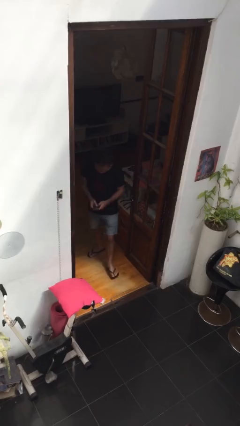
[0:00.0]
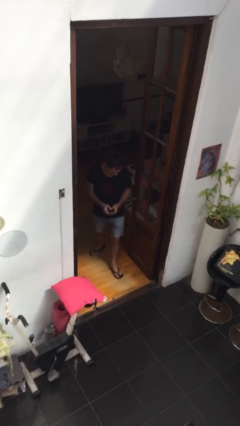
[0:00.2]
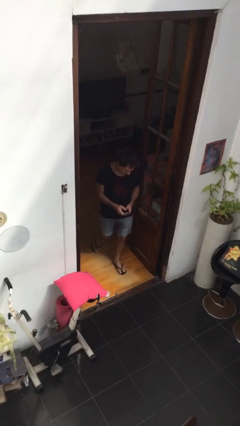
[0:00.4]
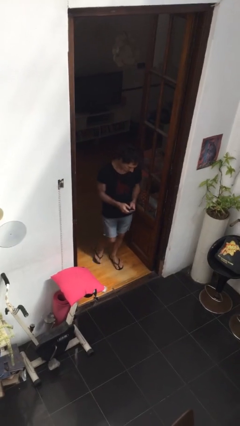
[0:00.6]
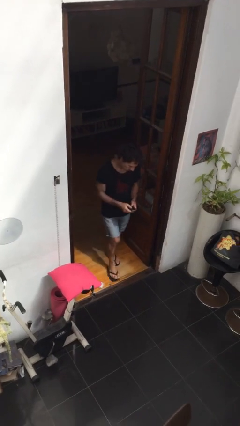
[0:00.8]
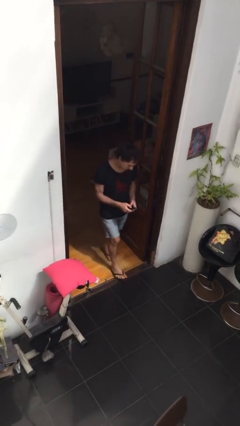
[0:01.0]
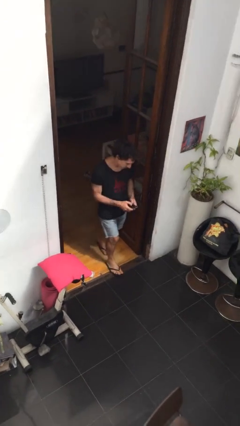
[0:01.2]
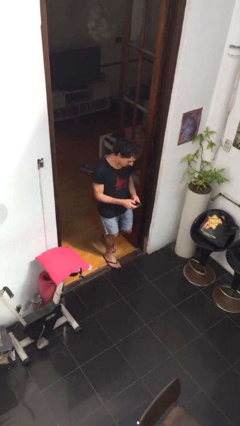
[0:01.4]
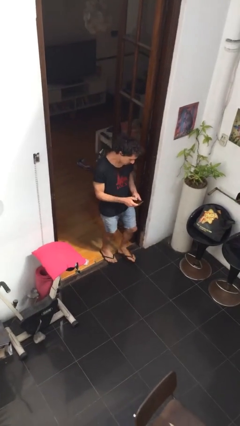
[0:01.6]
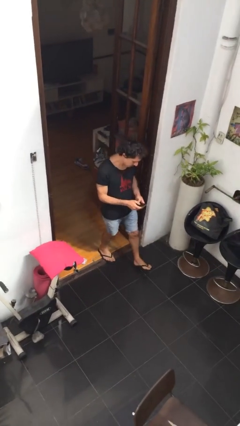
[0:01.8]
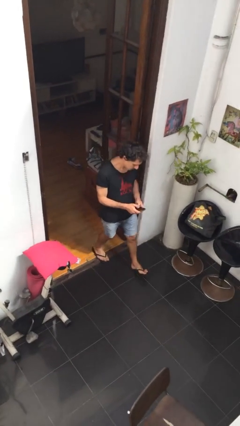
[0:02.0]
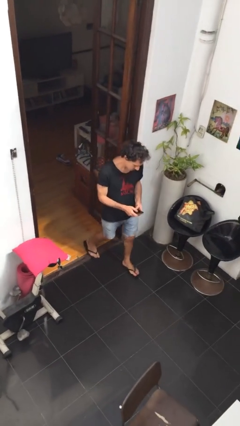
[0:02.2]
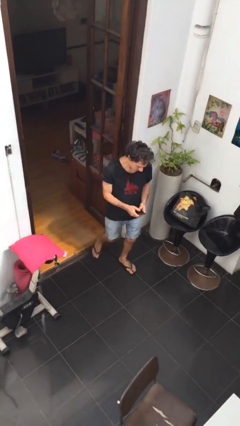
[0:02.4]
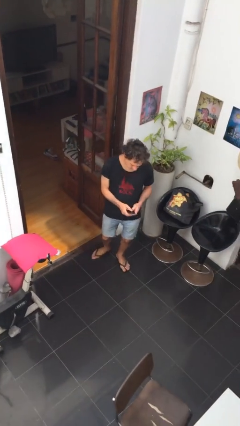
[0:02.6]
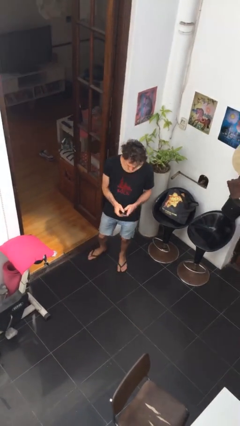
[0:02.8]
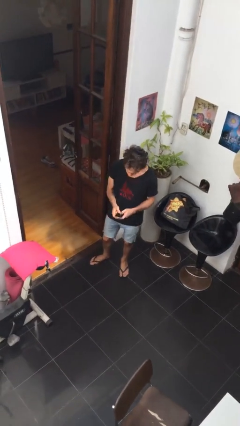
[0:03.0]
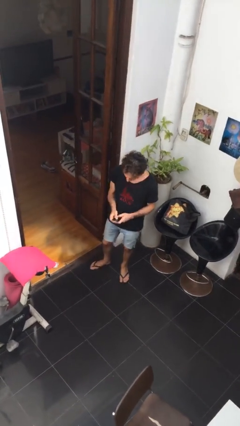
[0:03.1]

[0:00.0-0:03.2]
person enters scene through structure

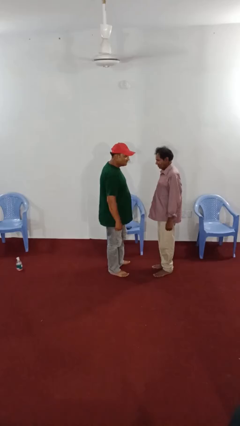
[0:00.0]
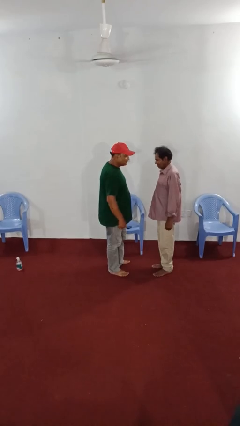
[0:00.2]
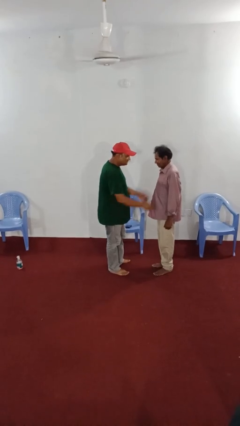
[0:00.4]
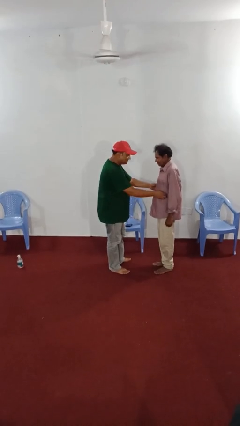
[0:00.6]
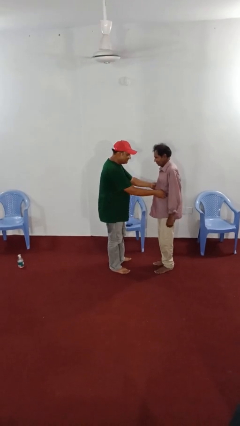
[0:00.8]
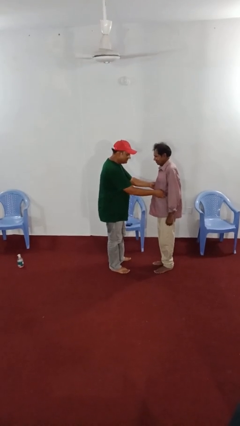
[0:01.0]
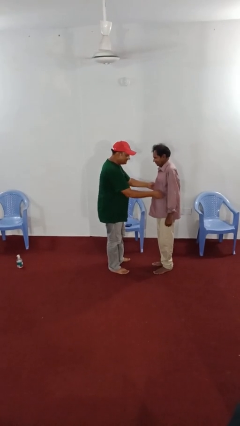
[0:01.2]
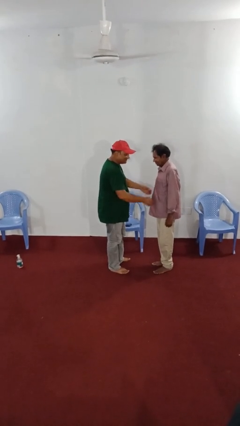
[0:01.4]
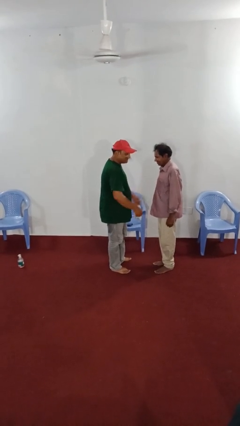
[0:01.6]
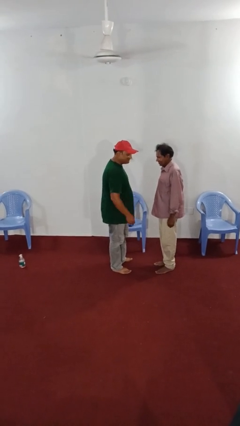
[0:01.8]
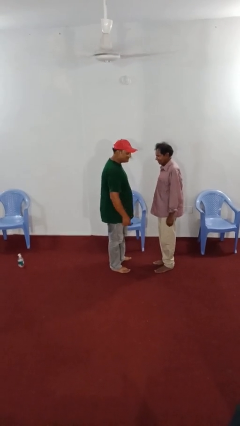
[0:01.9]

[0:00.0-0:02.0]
person tickles person

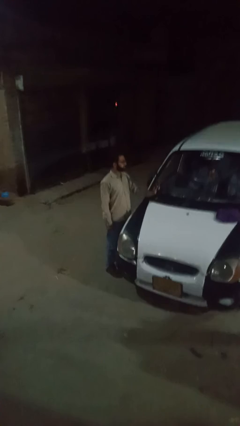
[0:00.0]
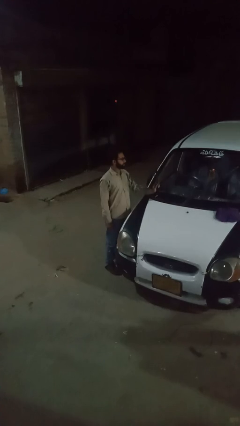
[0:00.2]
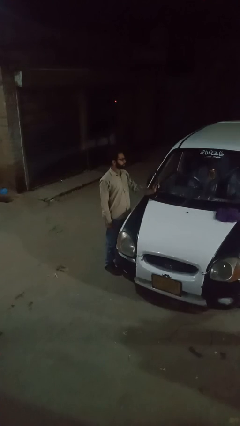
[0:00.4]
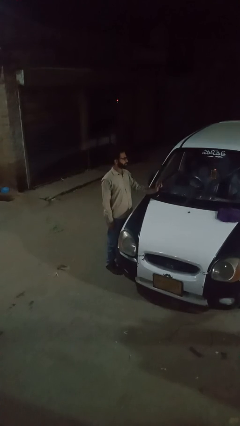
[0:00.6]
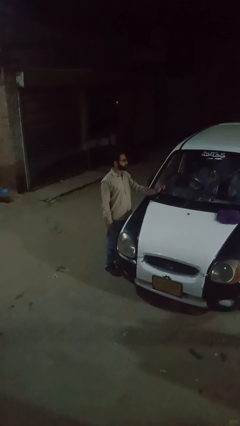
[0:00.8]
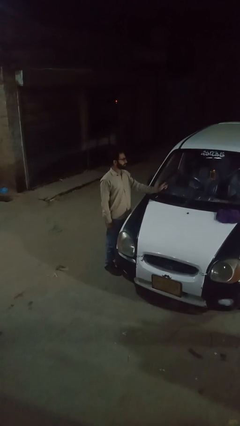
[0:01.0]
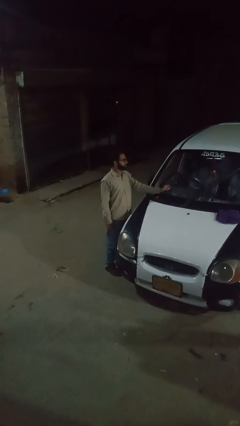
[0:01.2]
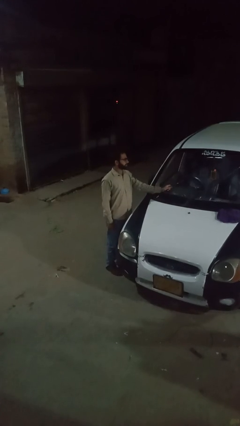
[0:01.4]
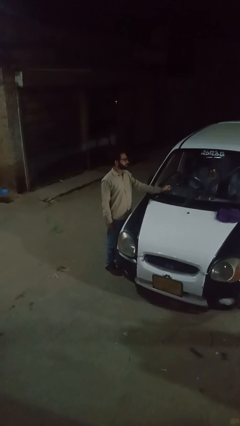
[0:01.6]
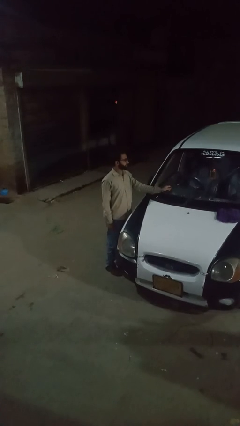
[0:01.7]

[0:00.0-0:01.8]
person flips down car wipers

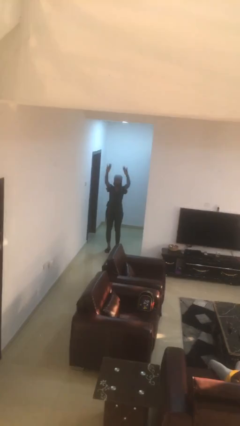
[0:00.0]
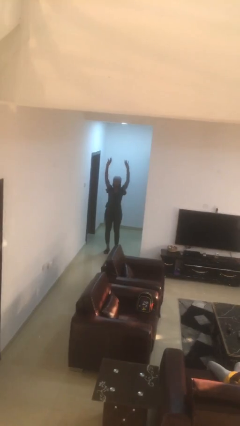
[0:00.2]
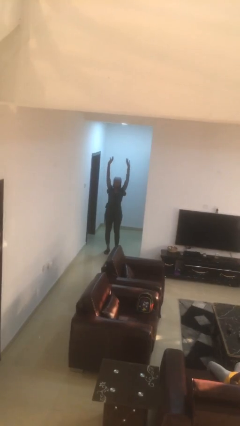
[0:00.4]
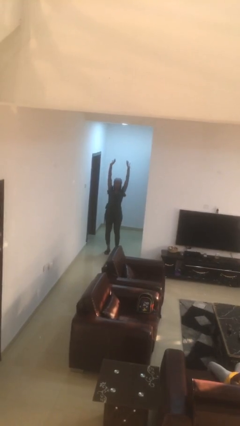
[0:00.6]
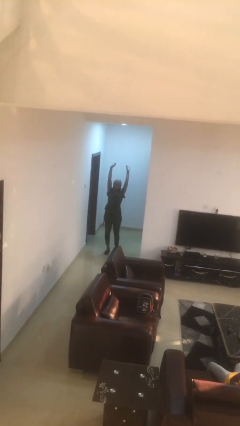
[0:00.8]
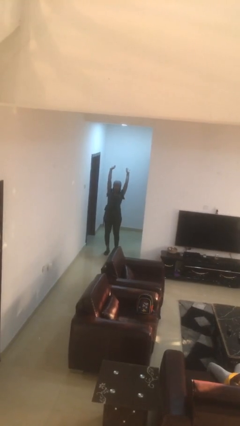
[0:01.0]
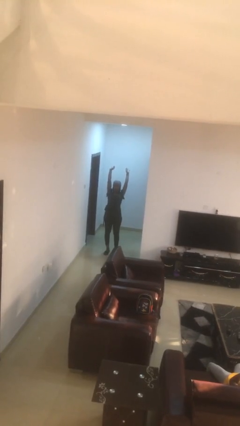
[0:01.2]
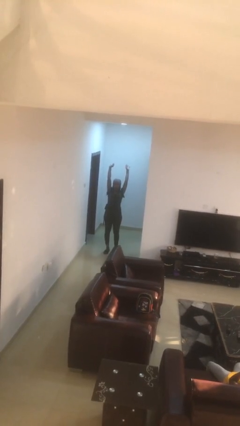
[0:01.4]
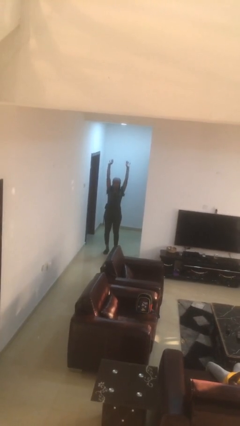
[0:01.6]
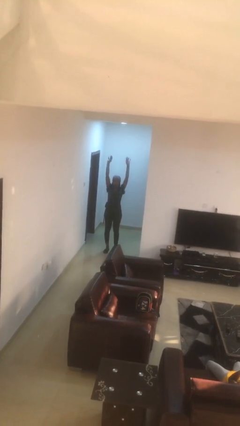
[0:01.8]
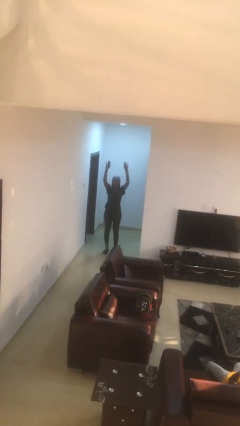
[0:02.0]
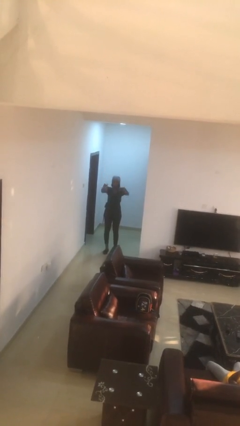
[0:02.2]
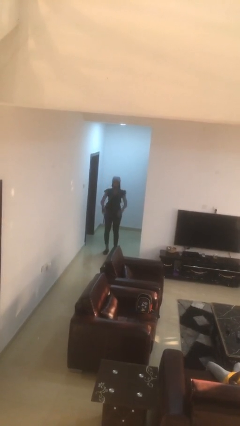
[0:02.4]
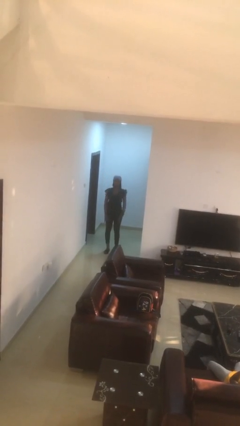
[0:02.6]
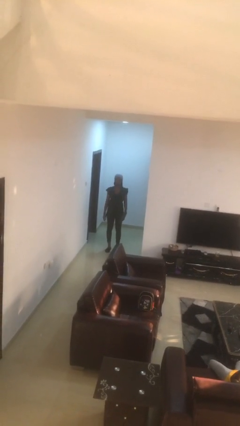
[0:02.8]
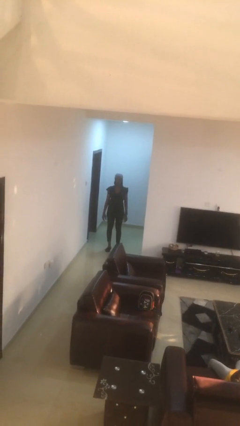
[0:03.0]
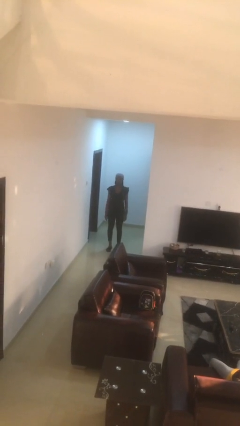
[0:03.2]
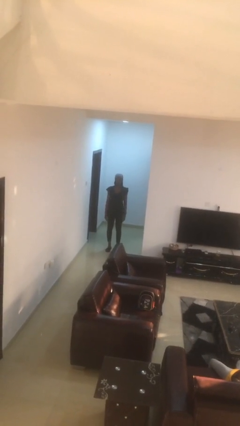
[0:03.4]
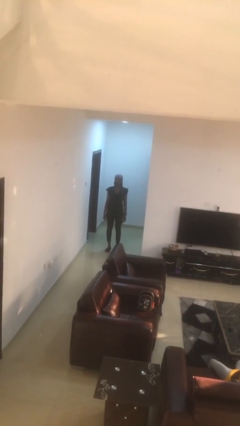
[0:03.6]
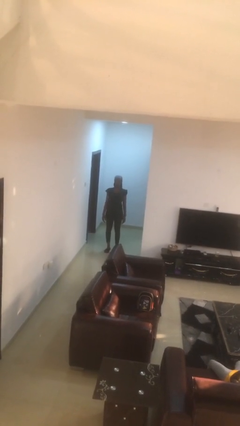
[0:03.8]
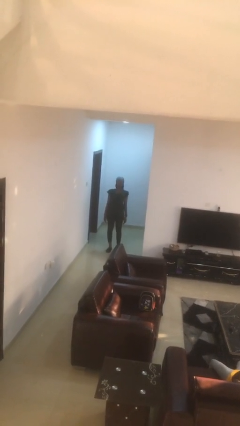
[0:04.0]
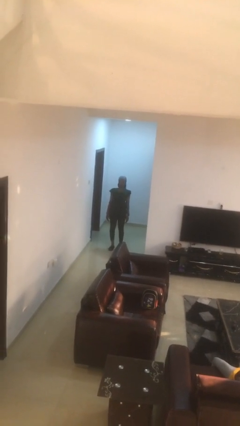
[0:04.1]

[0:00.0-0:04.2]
person stretches arms over head

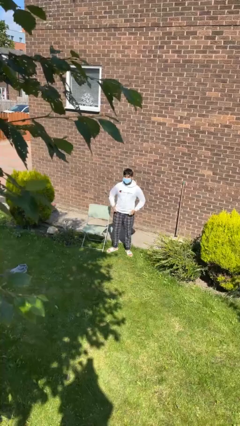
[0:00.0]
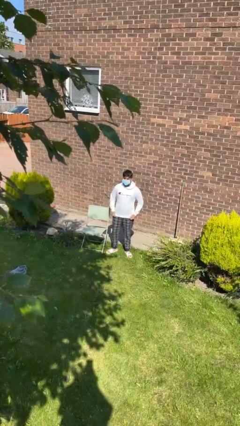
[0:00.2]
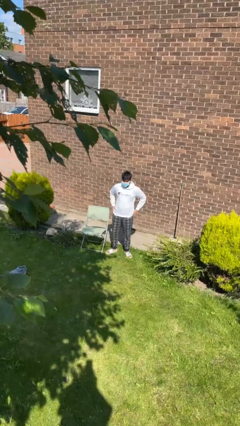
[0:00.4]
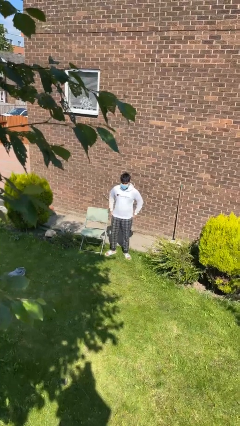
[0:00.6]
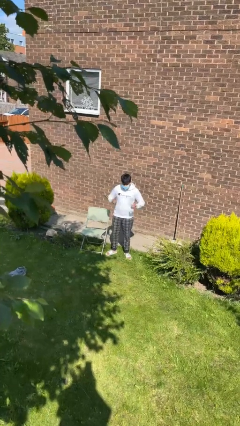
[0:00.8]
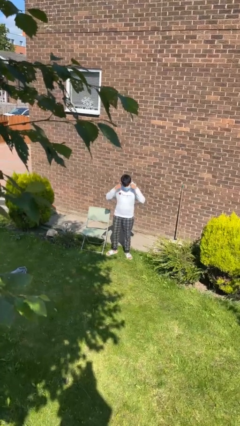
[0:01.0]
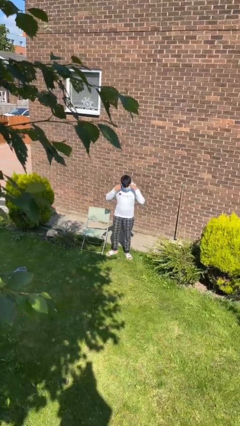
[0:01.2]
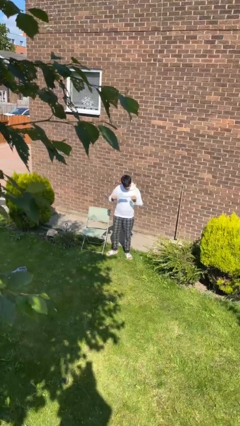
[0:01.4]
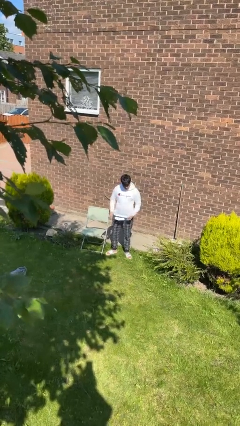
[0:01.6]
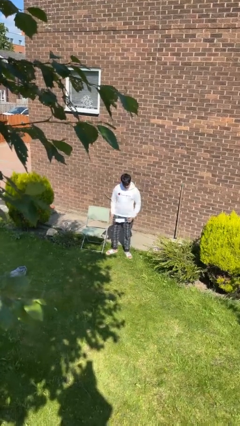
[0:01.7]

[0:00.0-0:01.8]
person takes off facemask

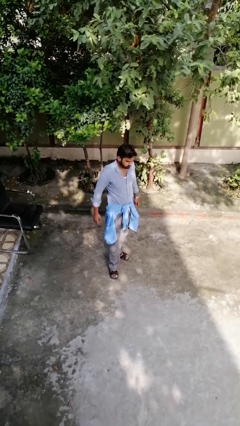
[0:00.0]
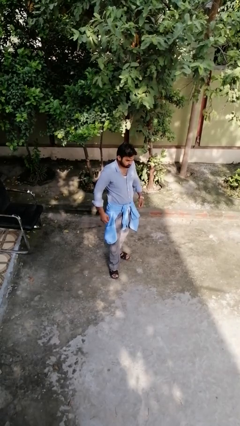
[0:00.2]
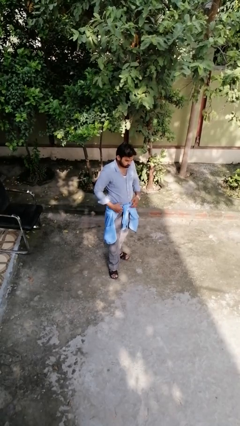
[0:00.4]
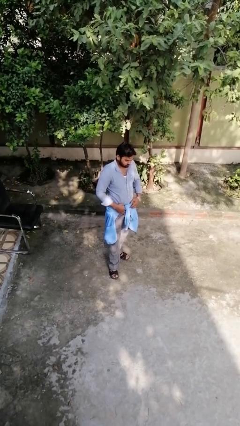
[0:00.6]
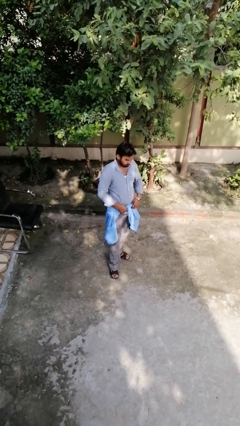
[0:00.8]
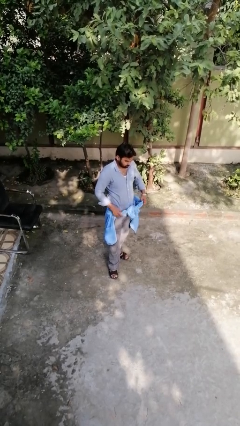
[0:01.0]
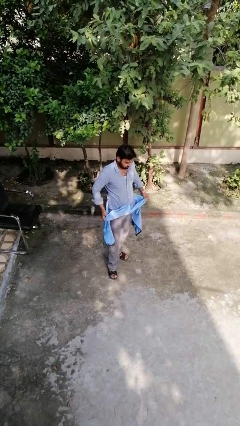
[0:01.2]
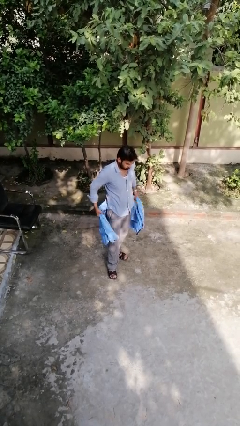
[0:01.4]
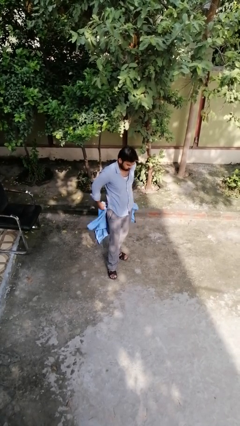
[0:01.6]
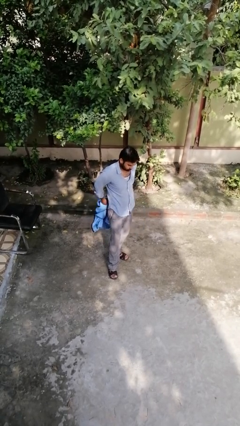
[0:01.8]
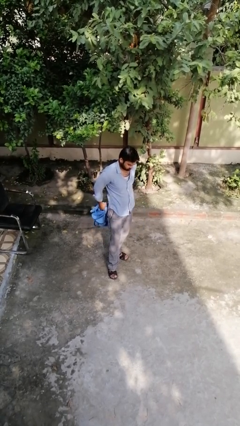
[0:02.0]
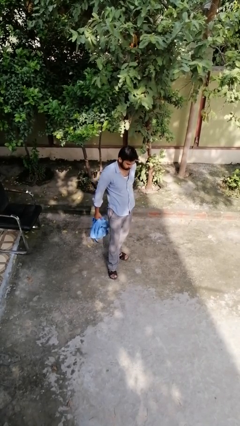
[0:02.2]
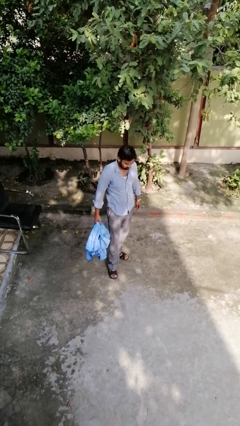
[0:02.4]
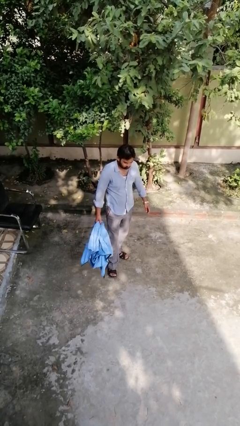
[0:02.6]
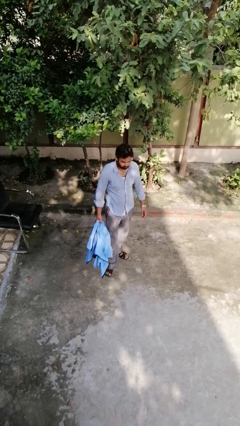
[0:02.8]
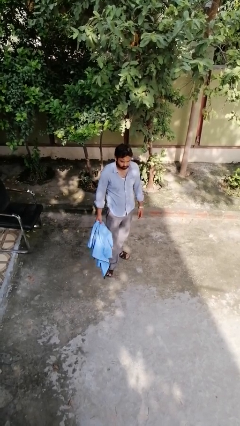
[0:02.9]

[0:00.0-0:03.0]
person unties jacket around waist

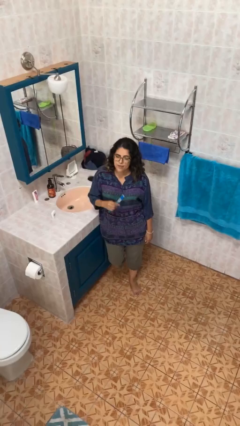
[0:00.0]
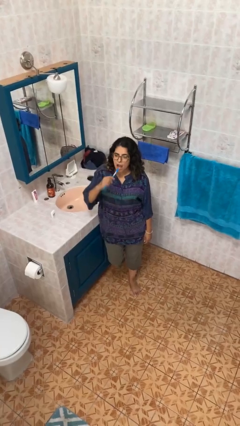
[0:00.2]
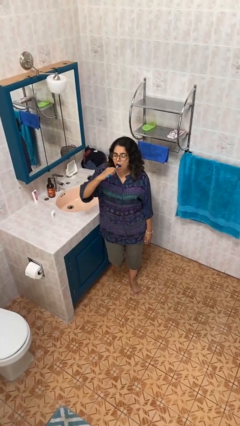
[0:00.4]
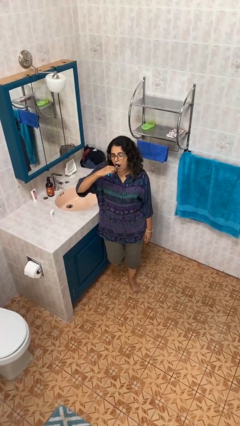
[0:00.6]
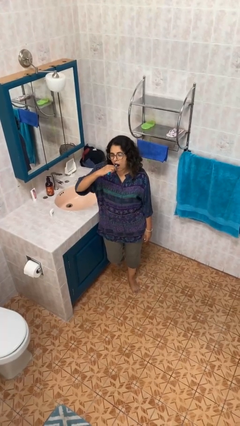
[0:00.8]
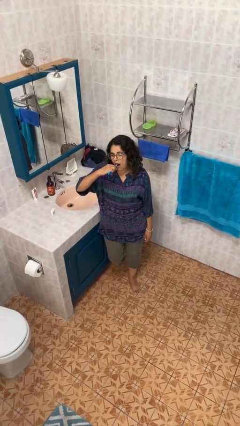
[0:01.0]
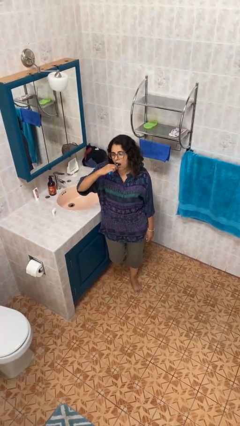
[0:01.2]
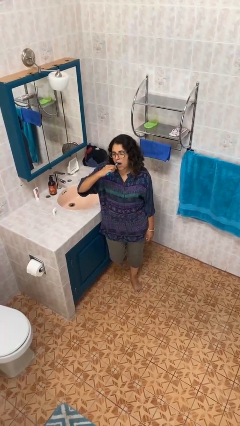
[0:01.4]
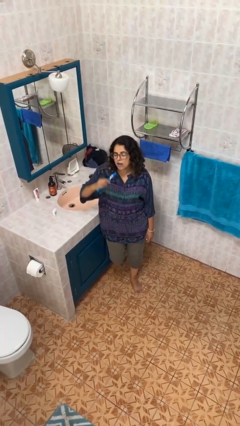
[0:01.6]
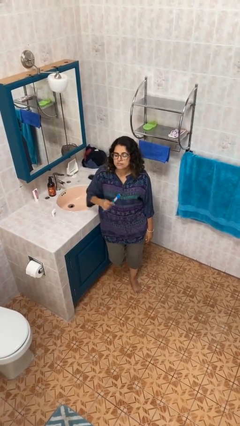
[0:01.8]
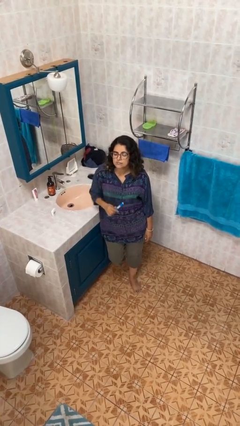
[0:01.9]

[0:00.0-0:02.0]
person brushes teeth
